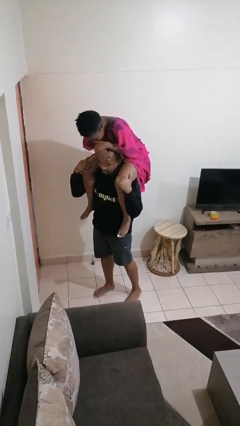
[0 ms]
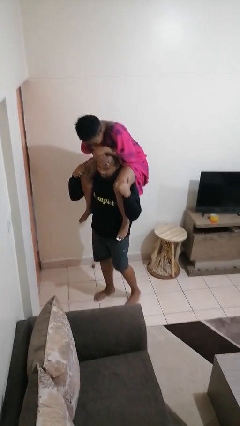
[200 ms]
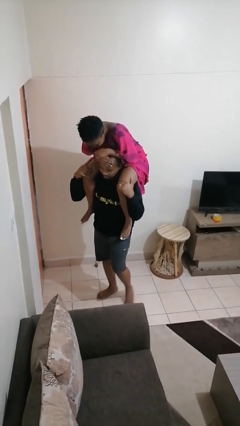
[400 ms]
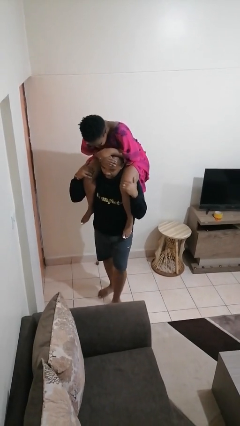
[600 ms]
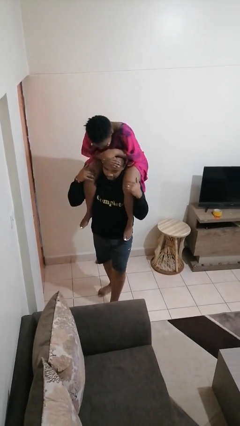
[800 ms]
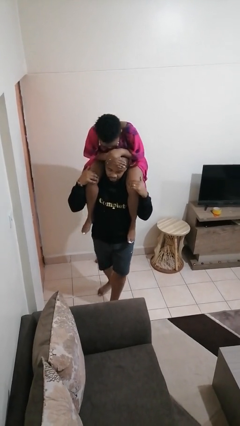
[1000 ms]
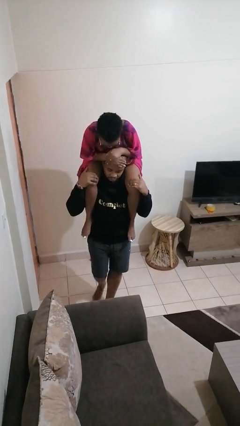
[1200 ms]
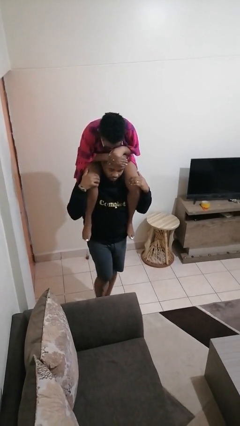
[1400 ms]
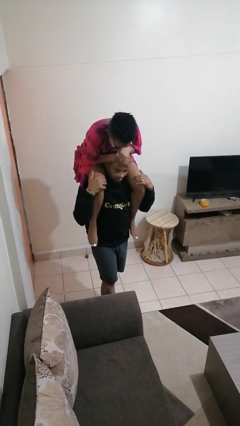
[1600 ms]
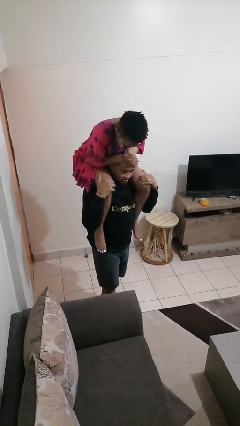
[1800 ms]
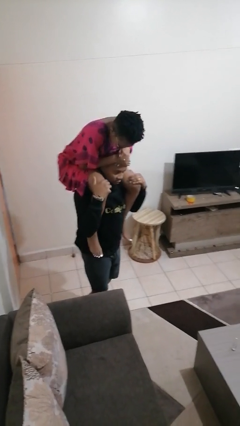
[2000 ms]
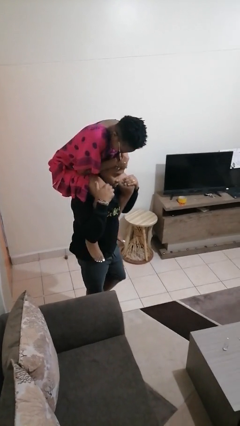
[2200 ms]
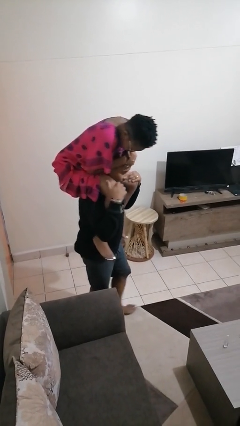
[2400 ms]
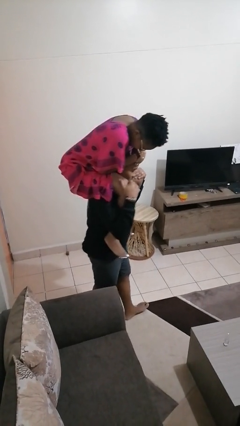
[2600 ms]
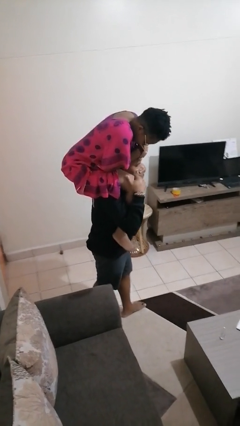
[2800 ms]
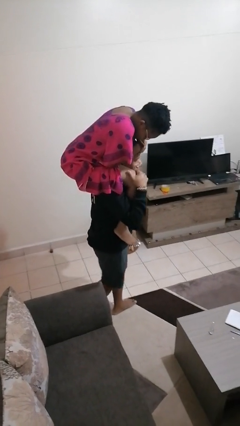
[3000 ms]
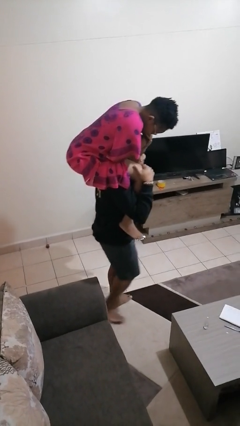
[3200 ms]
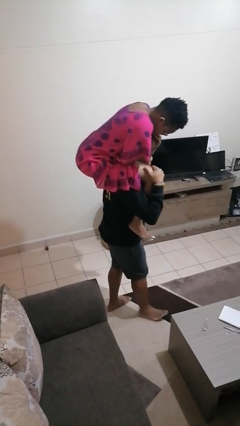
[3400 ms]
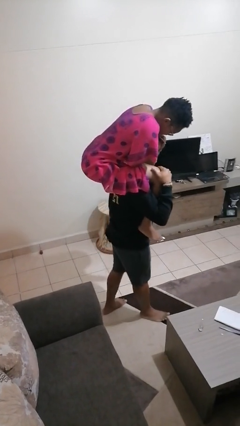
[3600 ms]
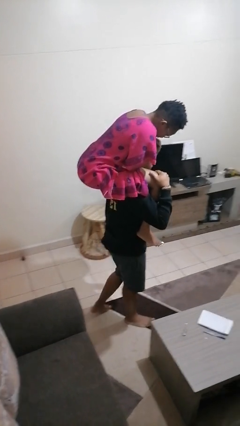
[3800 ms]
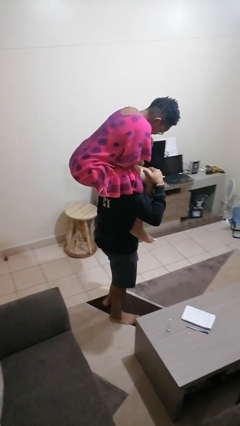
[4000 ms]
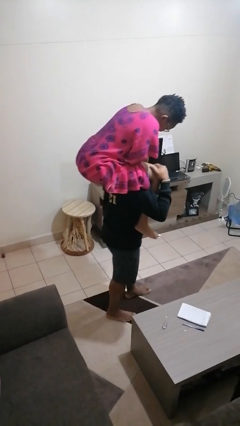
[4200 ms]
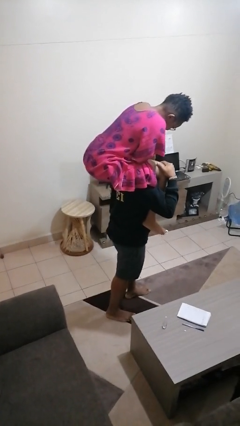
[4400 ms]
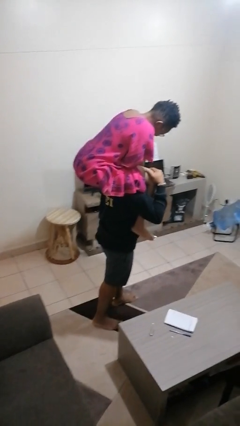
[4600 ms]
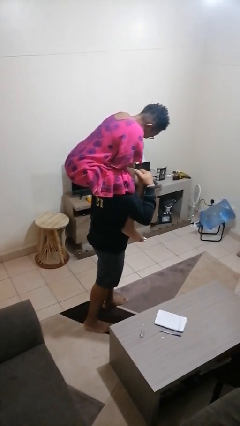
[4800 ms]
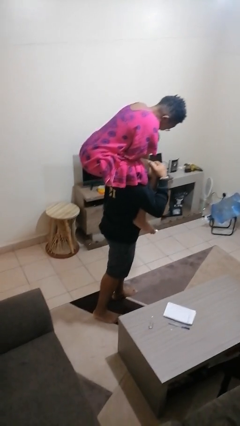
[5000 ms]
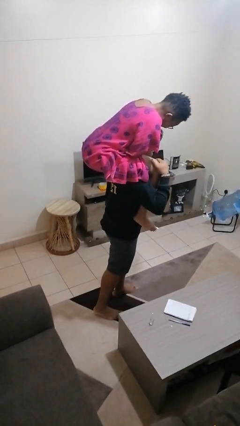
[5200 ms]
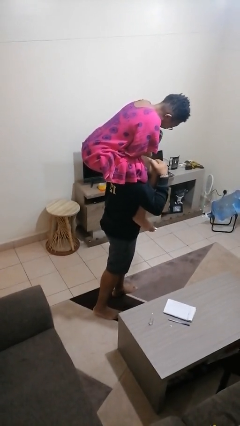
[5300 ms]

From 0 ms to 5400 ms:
person carries person on shoulders

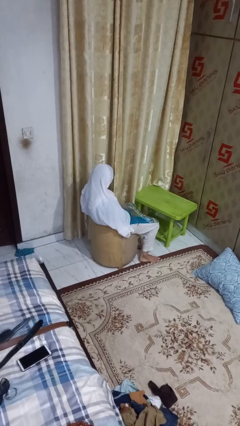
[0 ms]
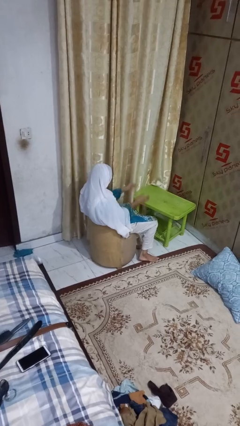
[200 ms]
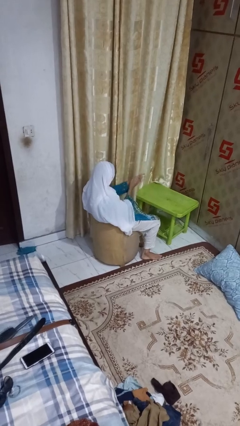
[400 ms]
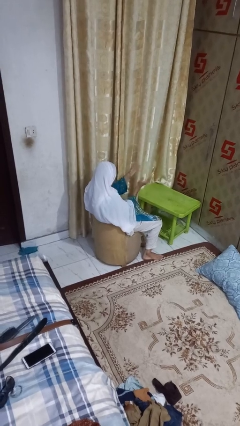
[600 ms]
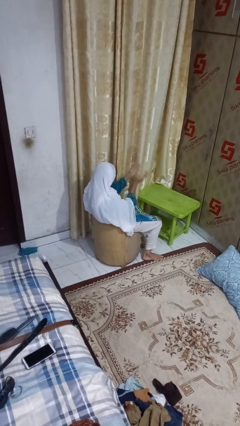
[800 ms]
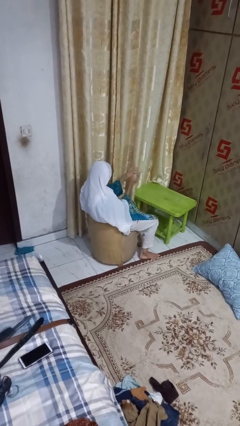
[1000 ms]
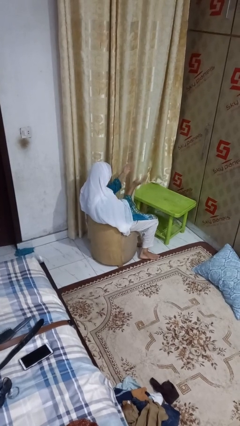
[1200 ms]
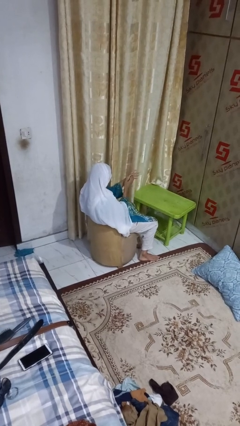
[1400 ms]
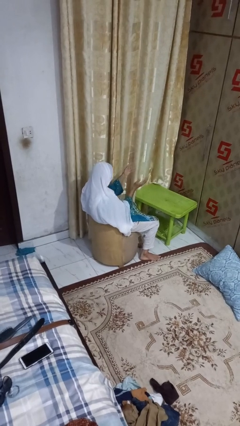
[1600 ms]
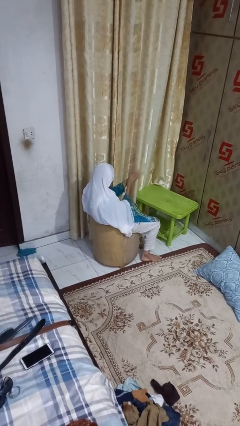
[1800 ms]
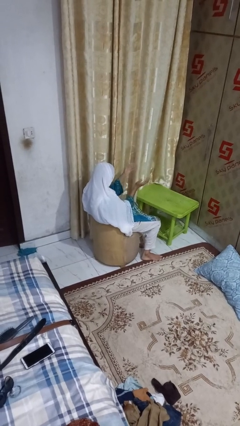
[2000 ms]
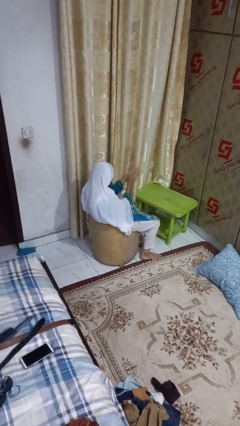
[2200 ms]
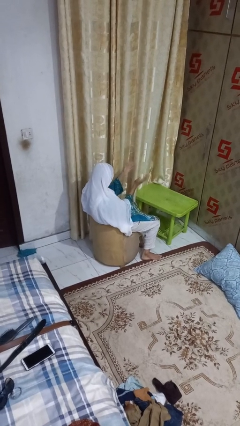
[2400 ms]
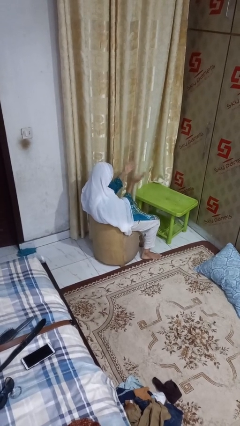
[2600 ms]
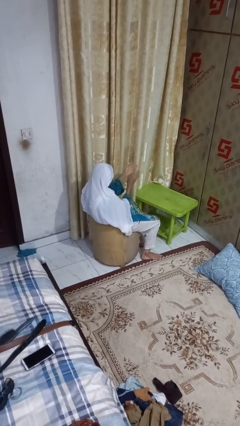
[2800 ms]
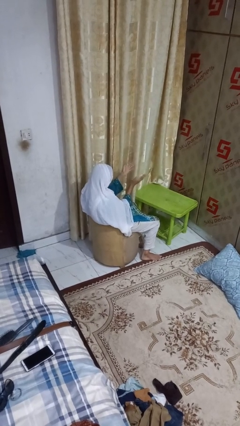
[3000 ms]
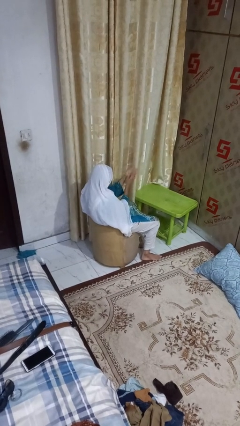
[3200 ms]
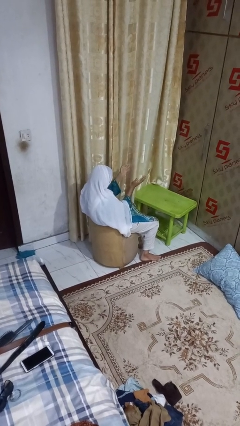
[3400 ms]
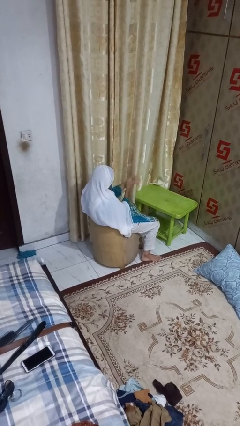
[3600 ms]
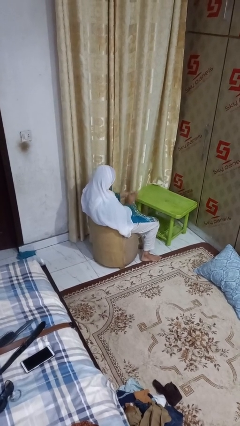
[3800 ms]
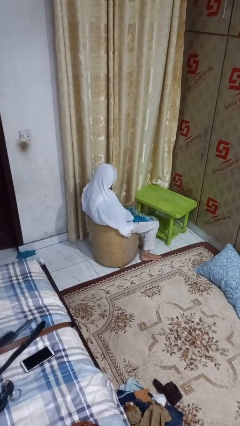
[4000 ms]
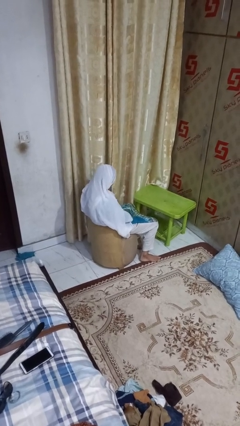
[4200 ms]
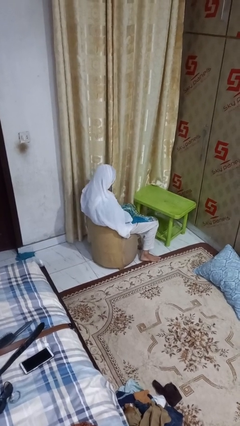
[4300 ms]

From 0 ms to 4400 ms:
person claps hands

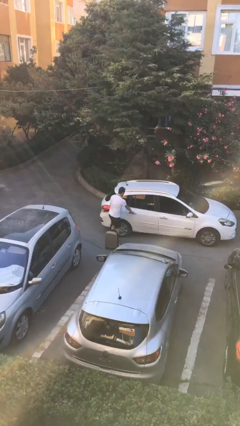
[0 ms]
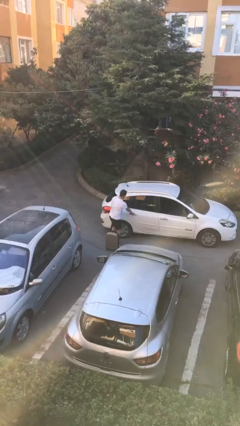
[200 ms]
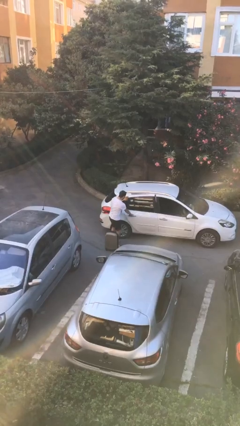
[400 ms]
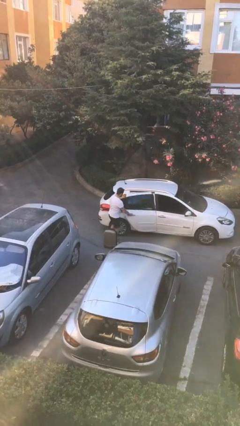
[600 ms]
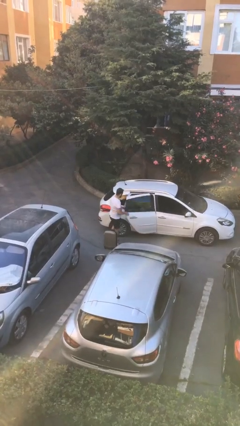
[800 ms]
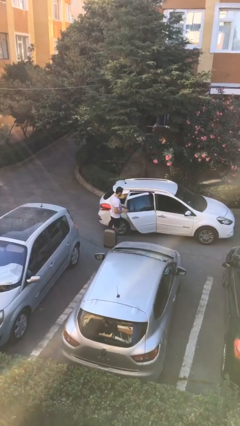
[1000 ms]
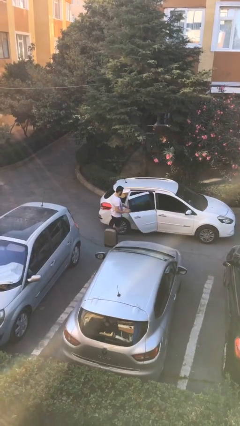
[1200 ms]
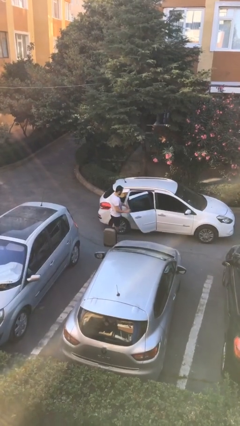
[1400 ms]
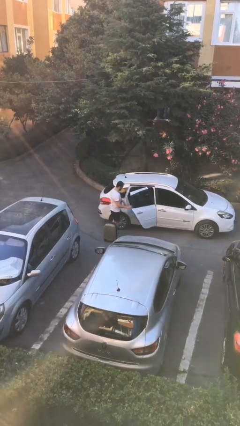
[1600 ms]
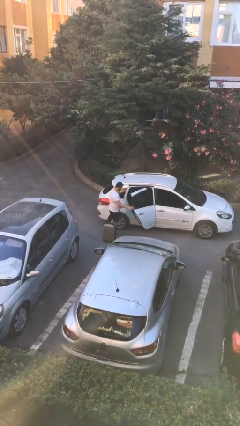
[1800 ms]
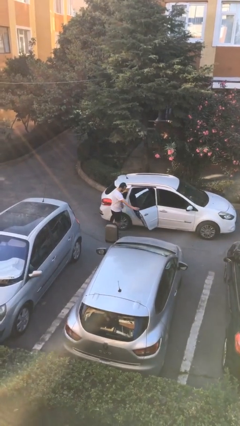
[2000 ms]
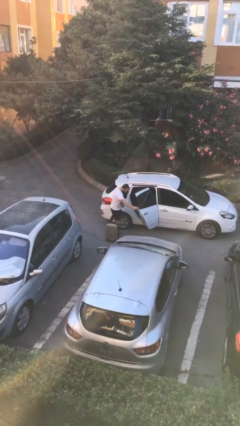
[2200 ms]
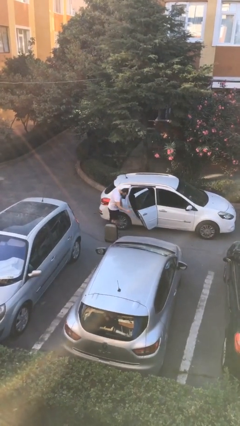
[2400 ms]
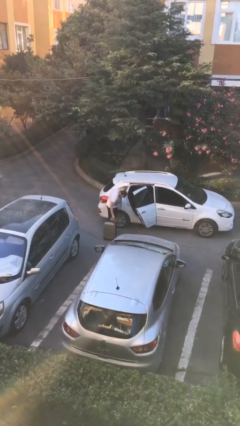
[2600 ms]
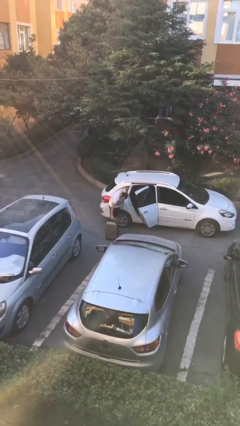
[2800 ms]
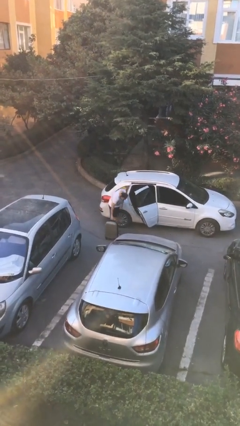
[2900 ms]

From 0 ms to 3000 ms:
person opens car door

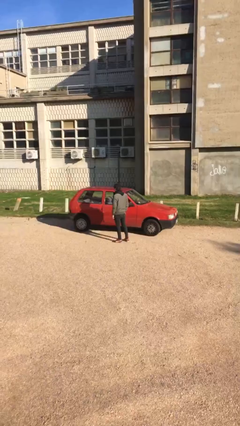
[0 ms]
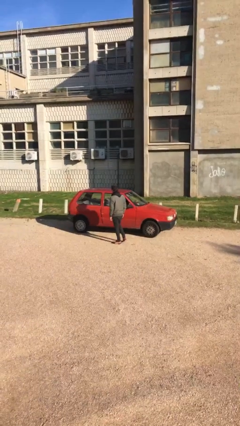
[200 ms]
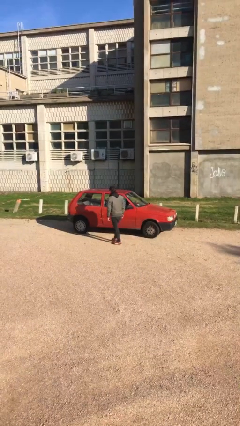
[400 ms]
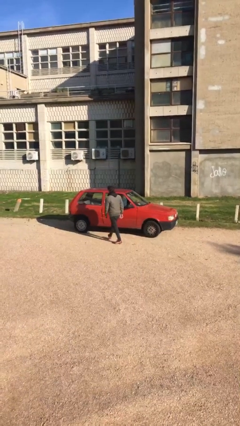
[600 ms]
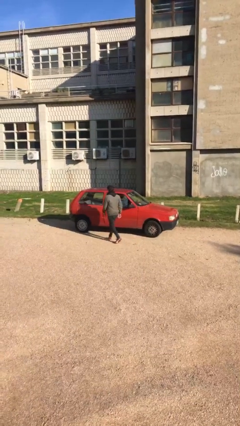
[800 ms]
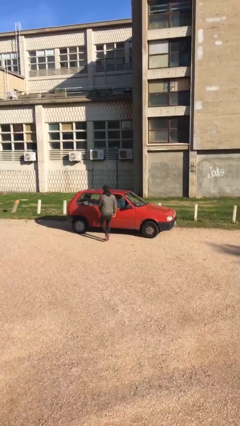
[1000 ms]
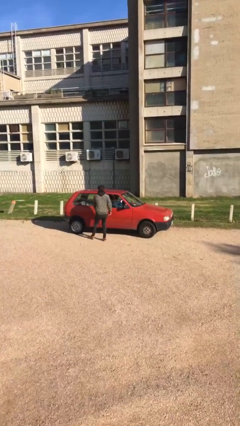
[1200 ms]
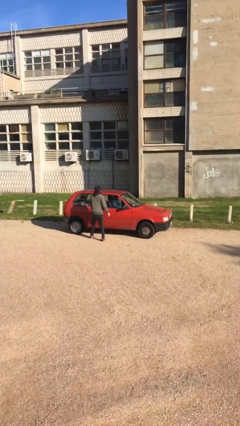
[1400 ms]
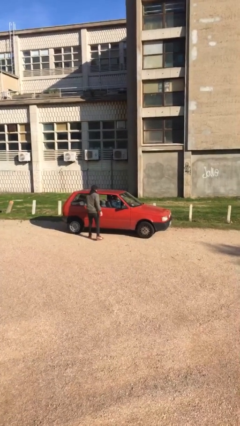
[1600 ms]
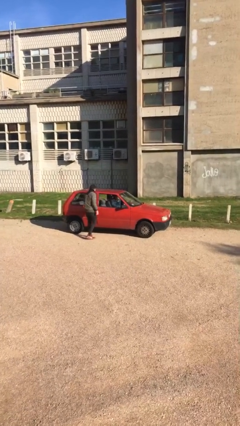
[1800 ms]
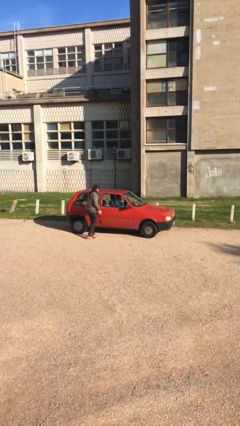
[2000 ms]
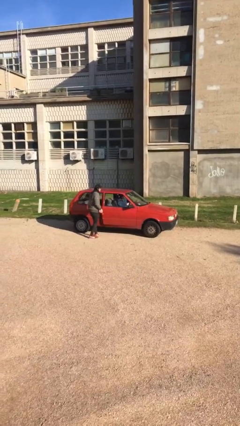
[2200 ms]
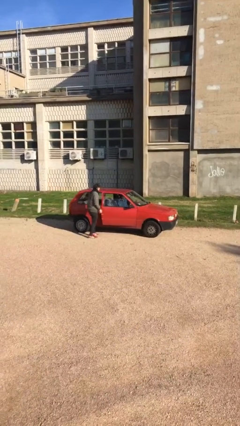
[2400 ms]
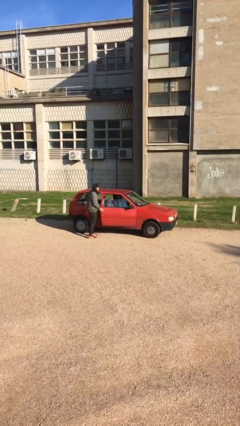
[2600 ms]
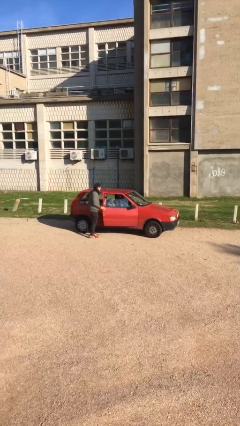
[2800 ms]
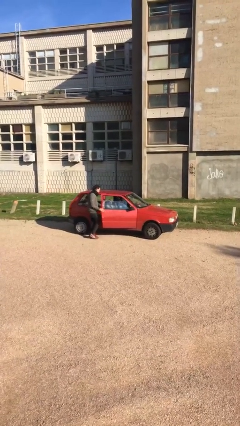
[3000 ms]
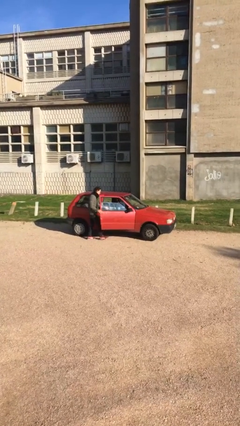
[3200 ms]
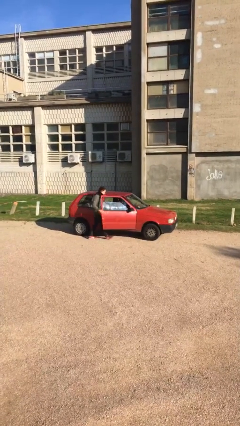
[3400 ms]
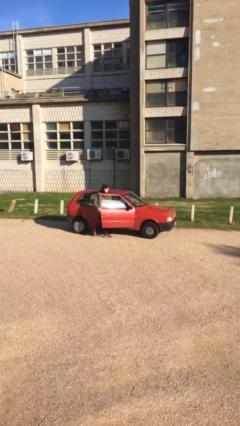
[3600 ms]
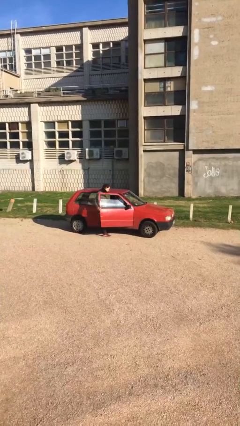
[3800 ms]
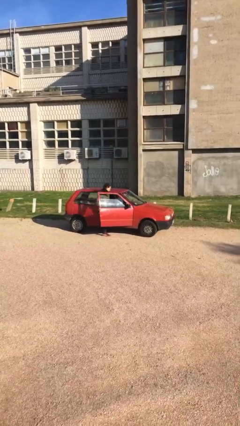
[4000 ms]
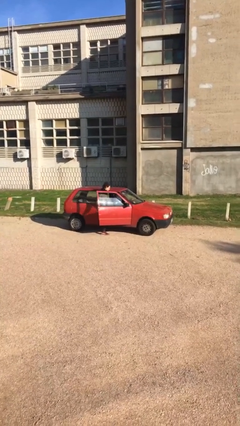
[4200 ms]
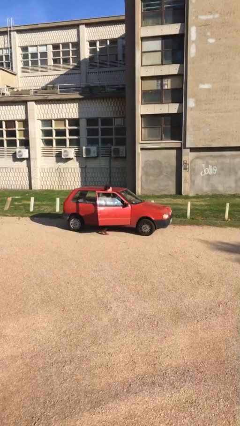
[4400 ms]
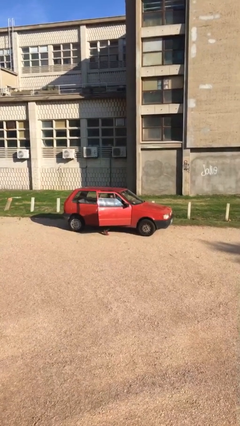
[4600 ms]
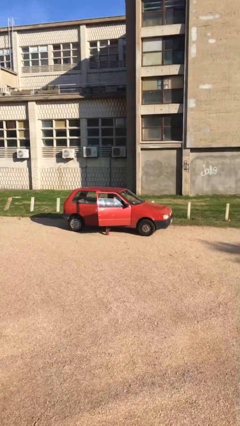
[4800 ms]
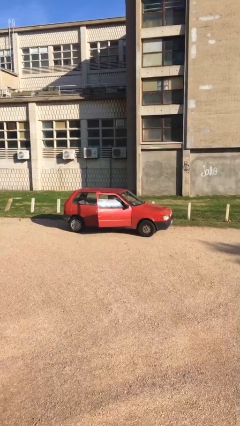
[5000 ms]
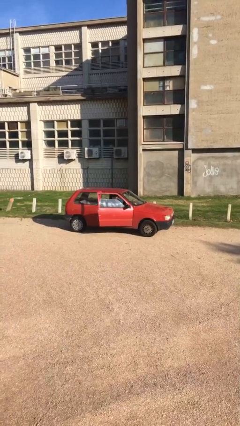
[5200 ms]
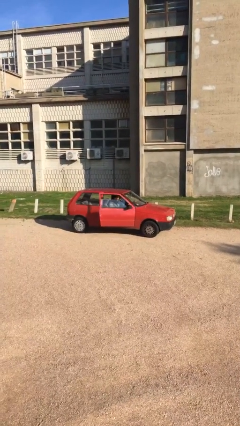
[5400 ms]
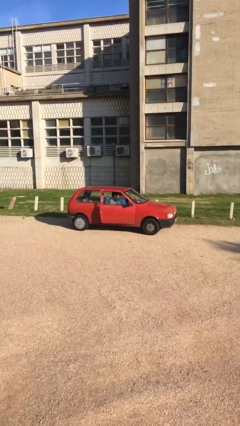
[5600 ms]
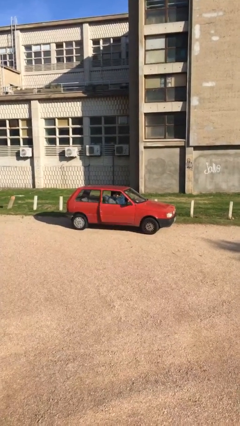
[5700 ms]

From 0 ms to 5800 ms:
car picks up person
